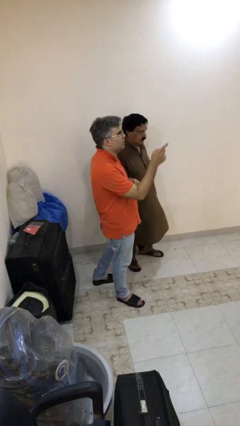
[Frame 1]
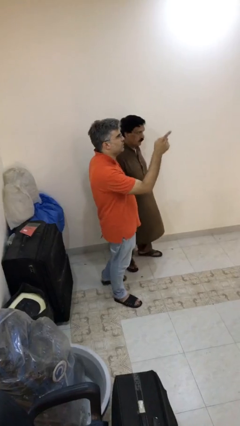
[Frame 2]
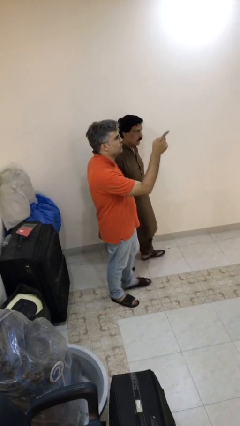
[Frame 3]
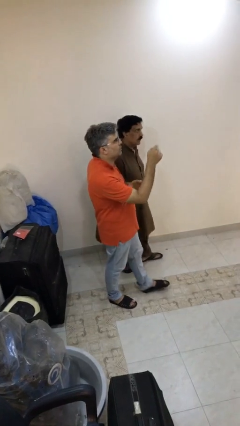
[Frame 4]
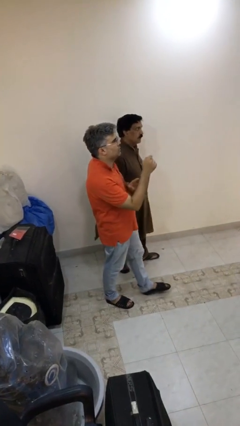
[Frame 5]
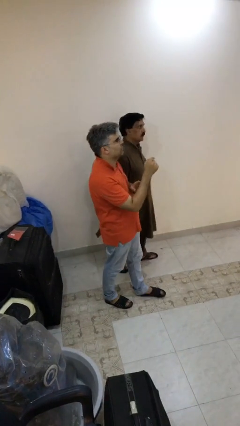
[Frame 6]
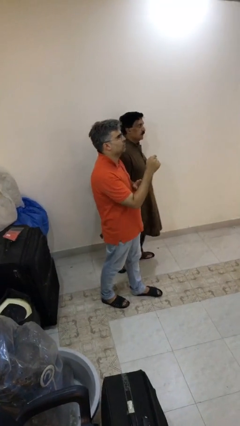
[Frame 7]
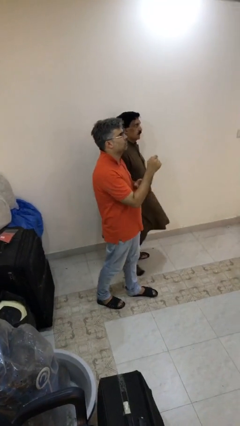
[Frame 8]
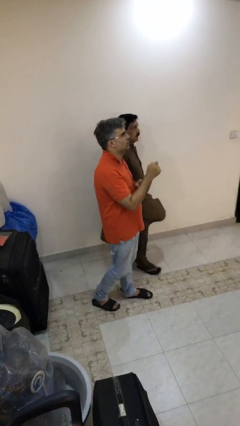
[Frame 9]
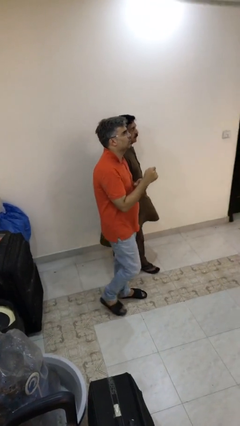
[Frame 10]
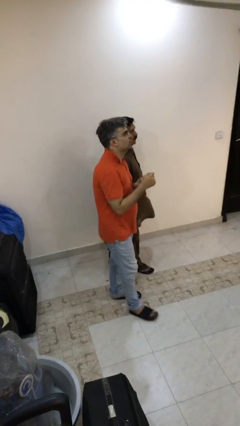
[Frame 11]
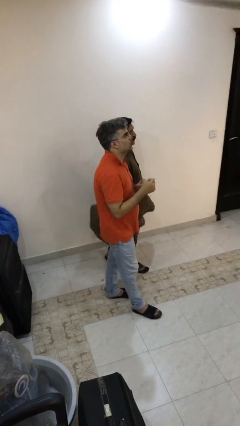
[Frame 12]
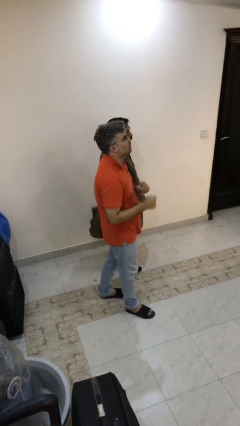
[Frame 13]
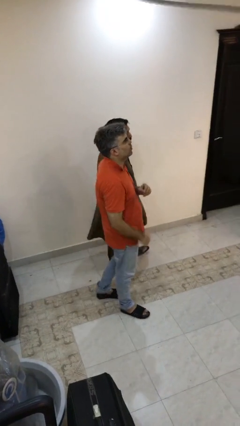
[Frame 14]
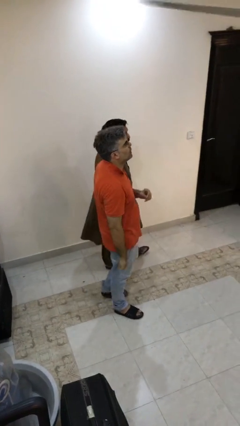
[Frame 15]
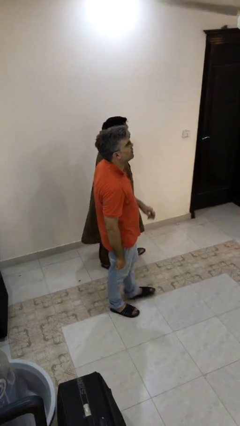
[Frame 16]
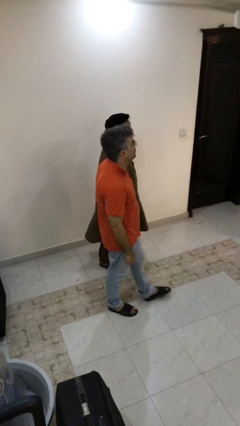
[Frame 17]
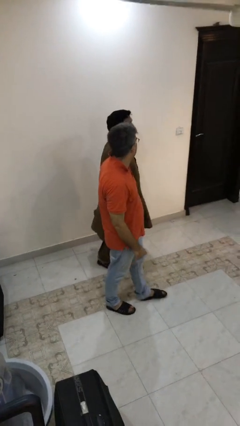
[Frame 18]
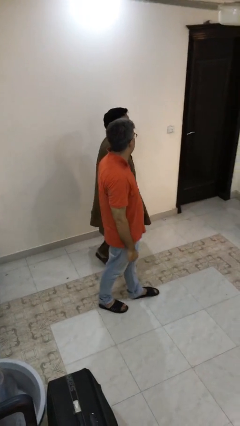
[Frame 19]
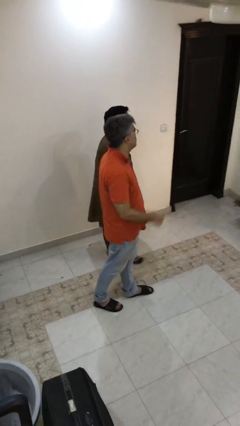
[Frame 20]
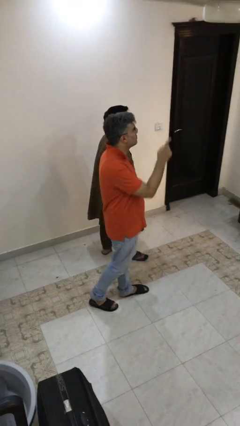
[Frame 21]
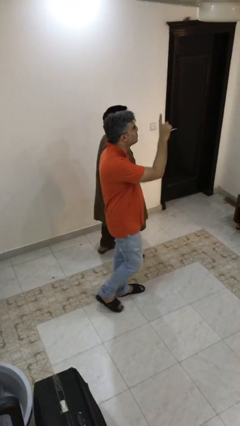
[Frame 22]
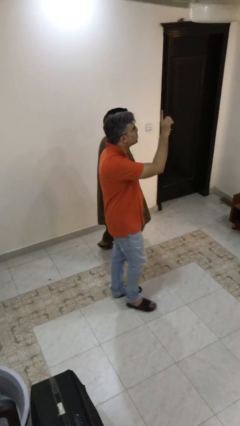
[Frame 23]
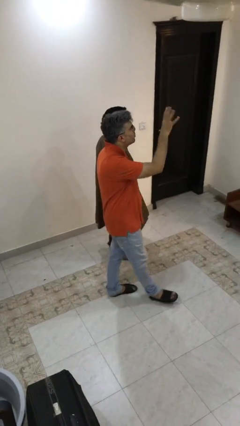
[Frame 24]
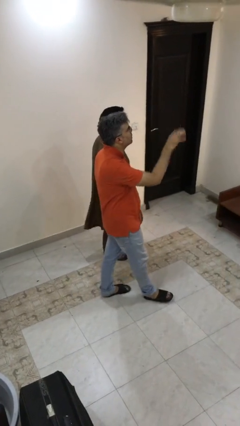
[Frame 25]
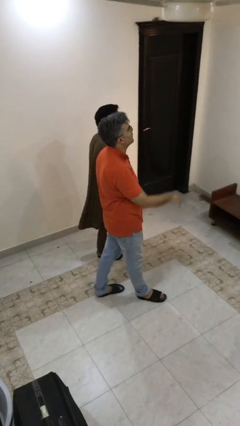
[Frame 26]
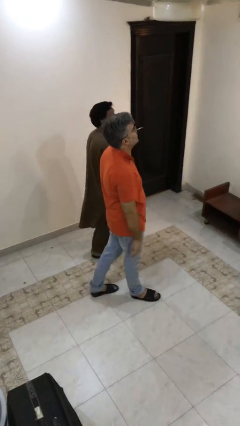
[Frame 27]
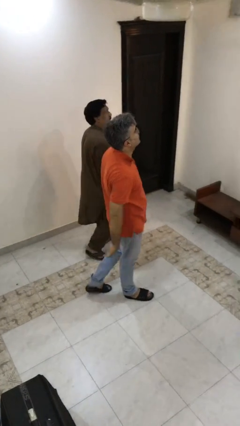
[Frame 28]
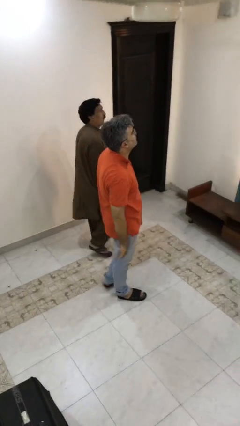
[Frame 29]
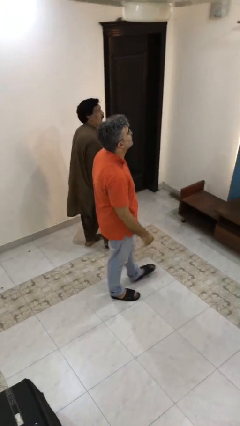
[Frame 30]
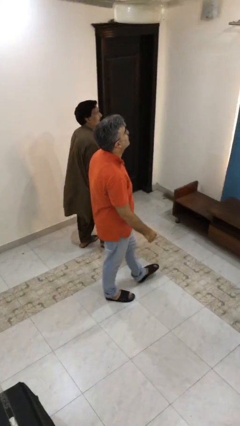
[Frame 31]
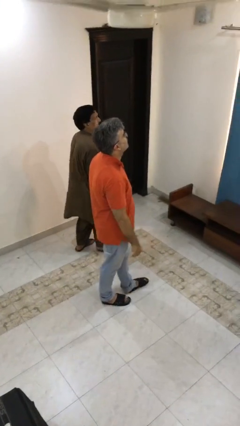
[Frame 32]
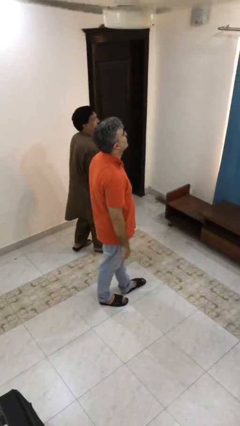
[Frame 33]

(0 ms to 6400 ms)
person talks to person

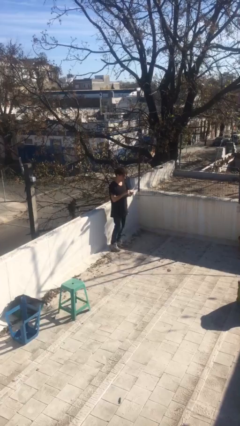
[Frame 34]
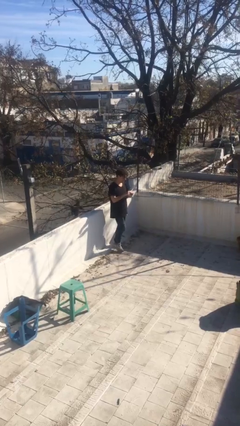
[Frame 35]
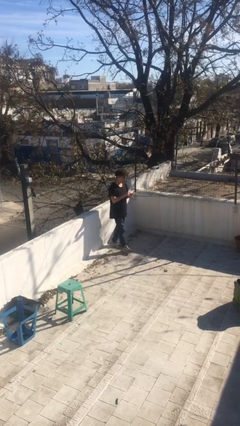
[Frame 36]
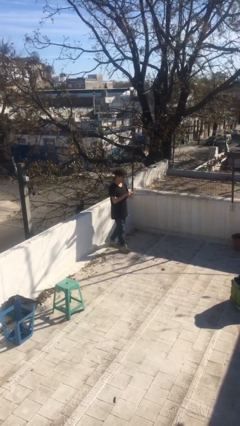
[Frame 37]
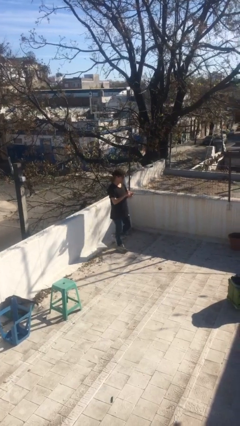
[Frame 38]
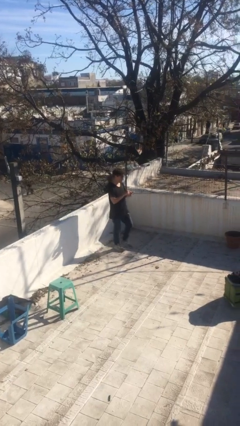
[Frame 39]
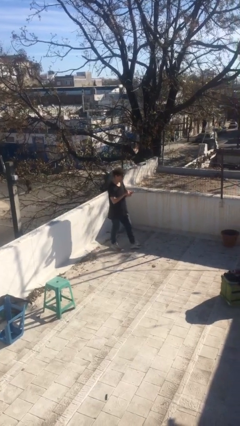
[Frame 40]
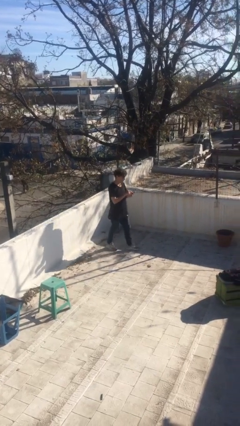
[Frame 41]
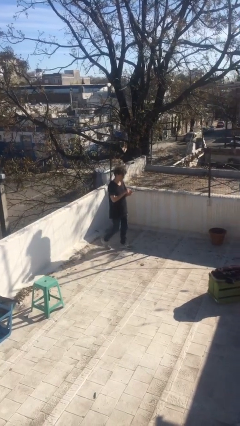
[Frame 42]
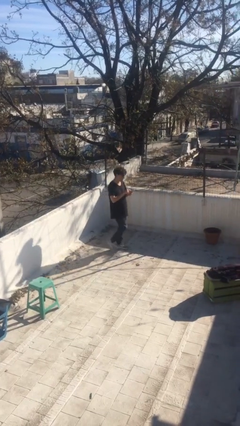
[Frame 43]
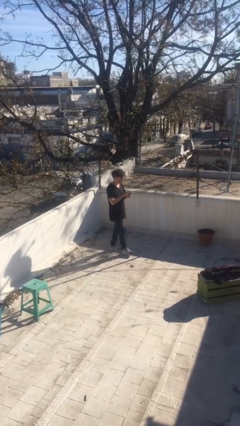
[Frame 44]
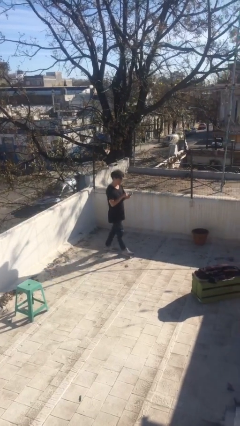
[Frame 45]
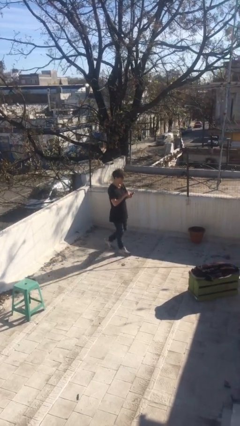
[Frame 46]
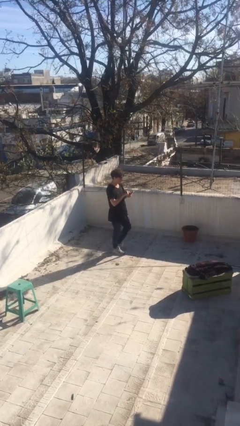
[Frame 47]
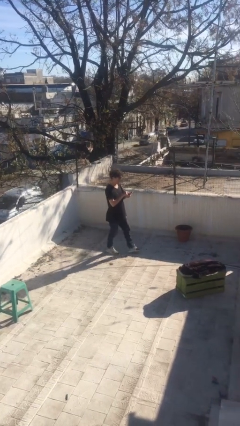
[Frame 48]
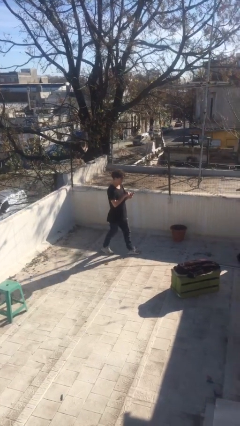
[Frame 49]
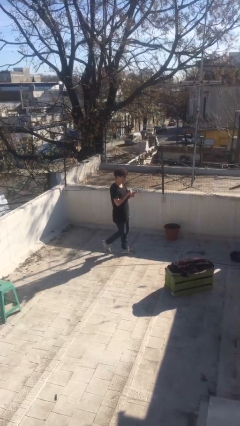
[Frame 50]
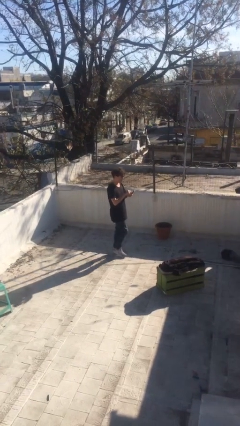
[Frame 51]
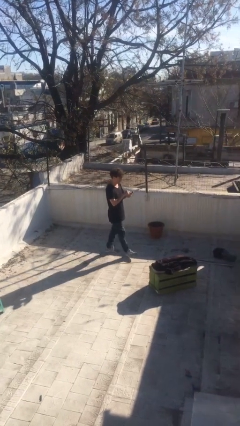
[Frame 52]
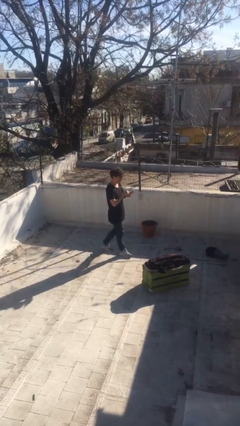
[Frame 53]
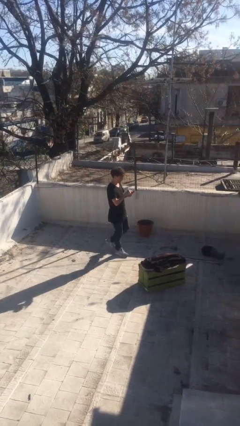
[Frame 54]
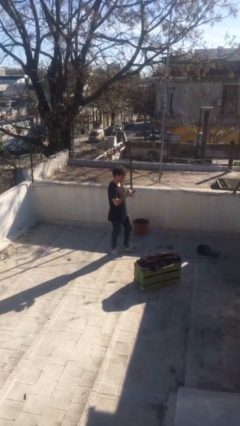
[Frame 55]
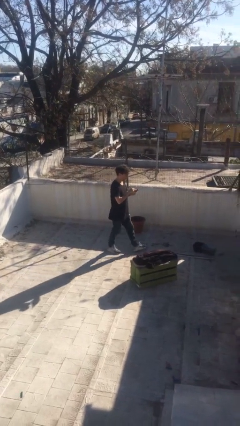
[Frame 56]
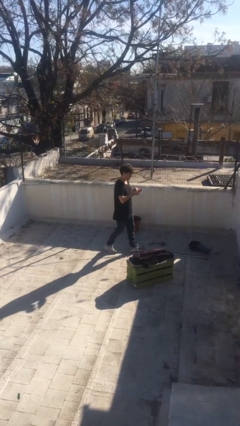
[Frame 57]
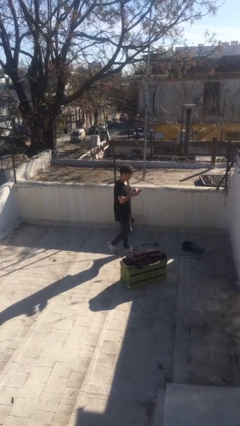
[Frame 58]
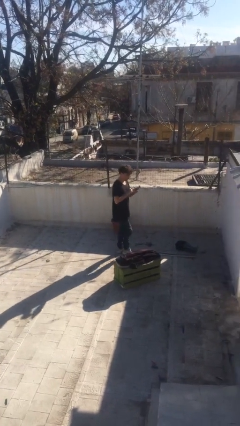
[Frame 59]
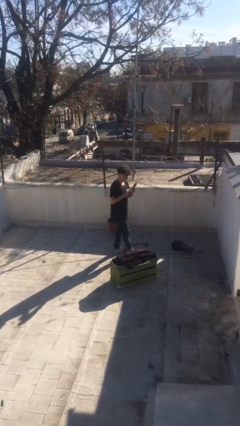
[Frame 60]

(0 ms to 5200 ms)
person texts on phone

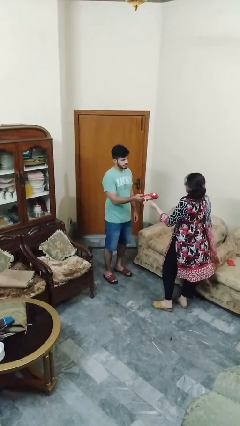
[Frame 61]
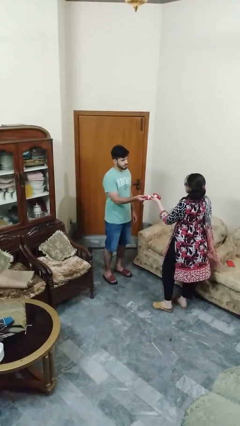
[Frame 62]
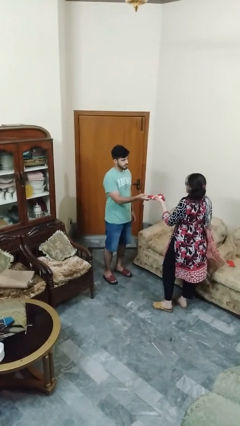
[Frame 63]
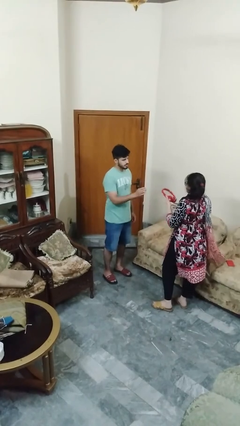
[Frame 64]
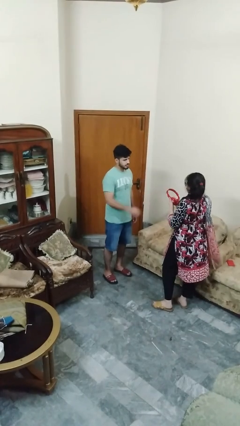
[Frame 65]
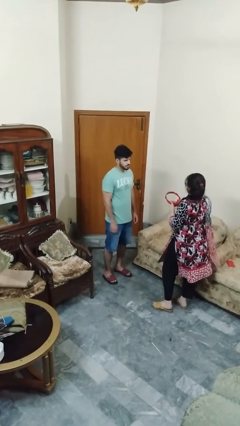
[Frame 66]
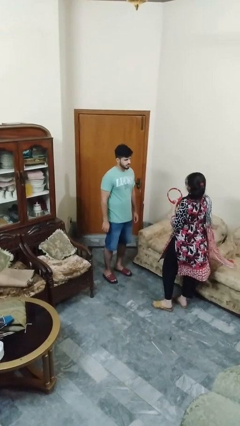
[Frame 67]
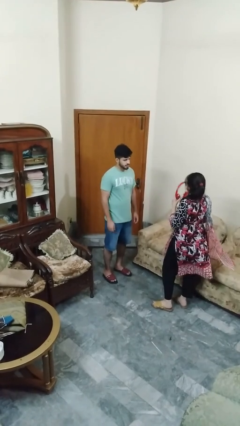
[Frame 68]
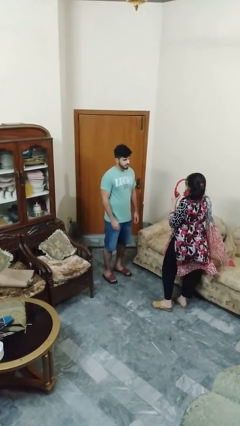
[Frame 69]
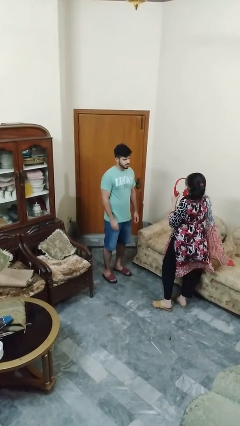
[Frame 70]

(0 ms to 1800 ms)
person transfers object to person

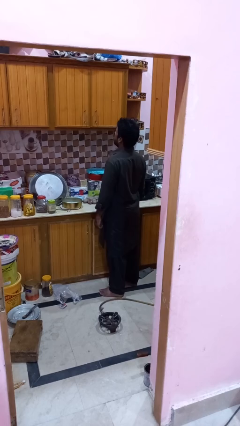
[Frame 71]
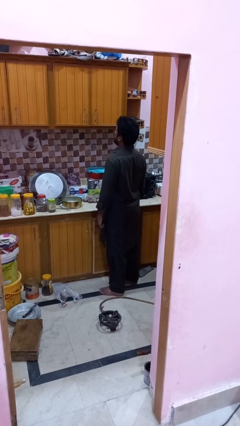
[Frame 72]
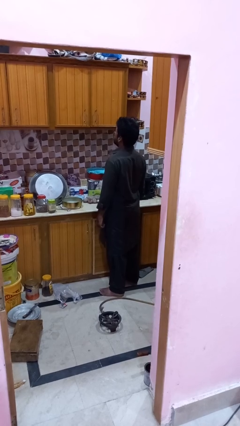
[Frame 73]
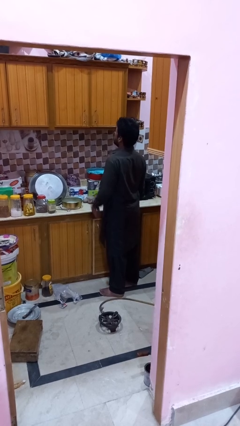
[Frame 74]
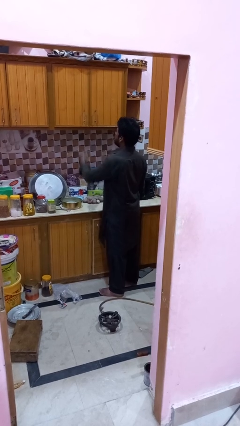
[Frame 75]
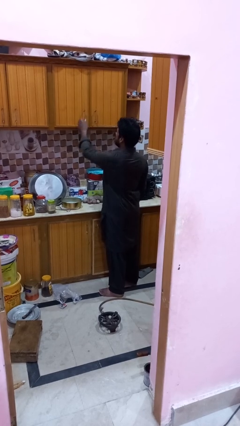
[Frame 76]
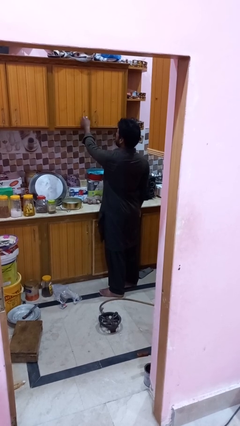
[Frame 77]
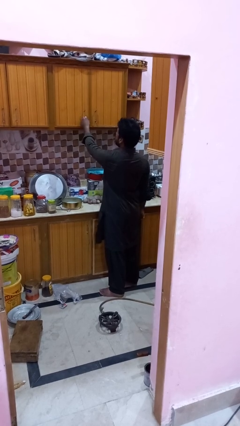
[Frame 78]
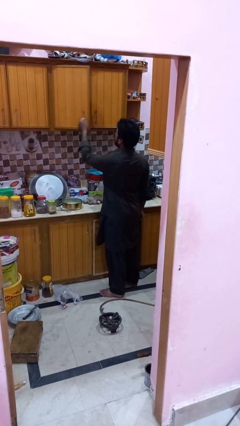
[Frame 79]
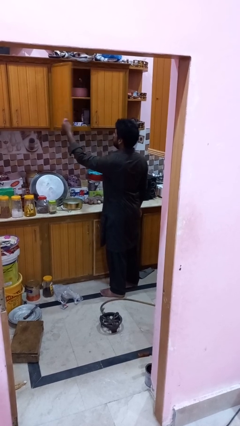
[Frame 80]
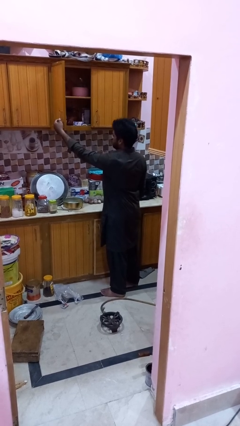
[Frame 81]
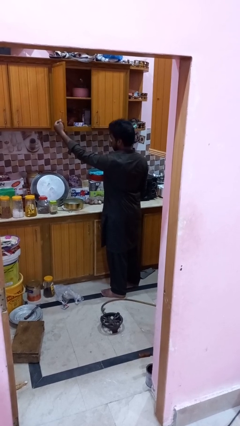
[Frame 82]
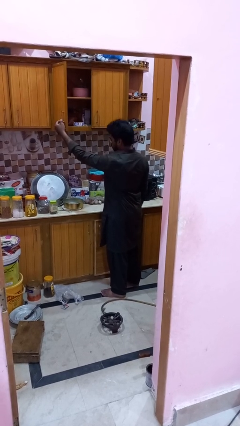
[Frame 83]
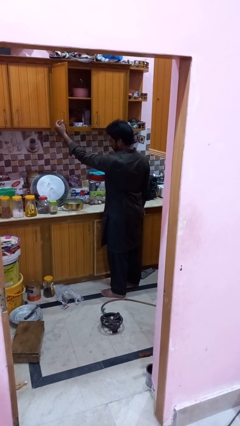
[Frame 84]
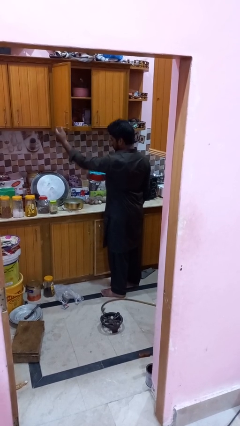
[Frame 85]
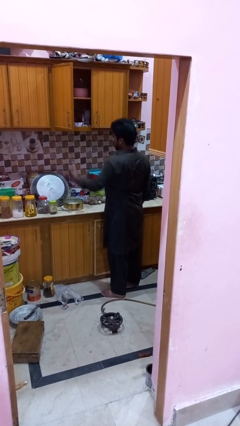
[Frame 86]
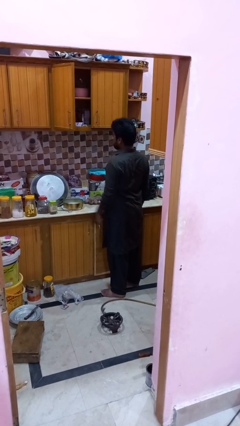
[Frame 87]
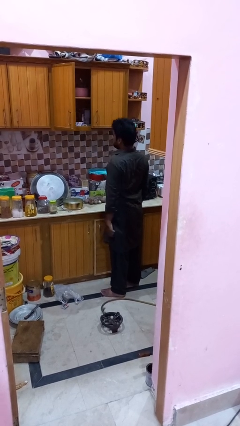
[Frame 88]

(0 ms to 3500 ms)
person opens cabinet

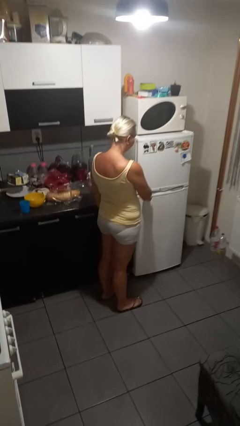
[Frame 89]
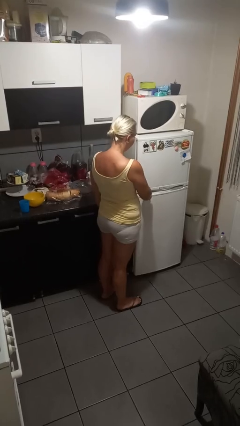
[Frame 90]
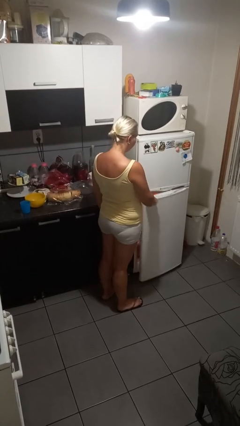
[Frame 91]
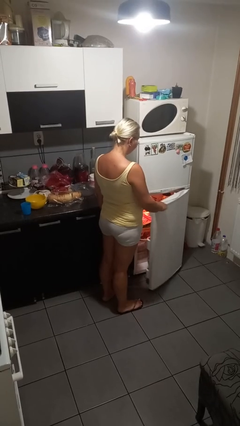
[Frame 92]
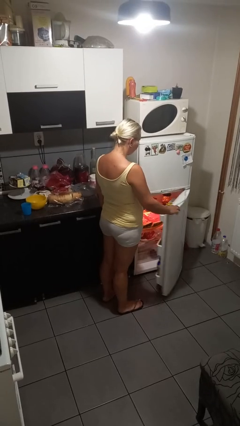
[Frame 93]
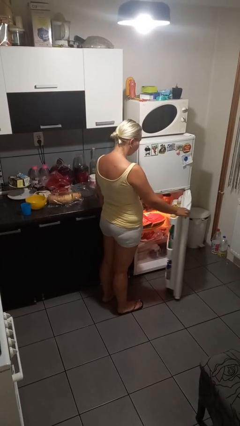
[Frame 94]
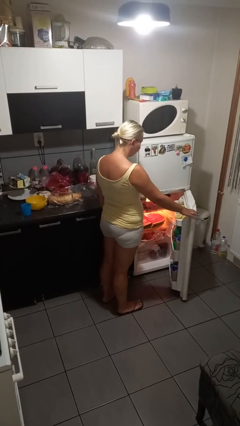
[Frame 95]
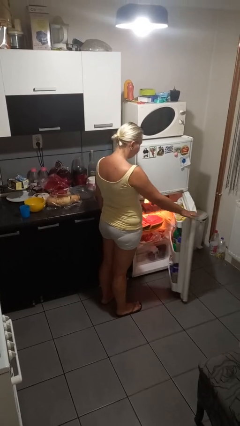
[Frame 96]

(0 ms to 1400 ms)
person opens refrigerator
